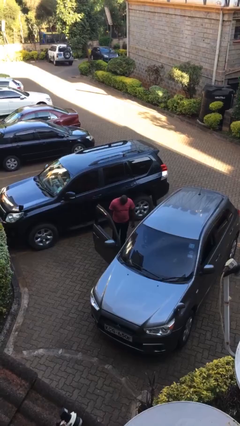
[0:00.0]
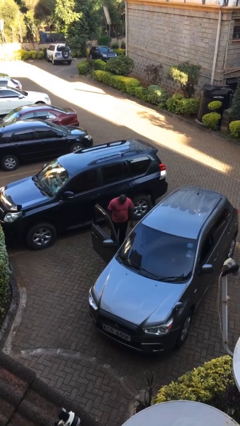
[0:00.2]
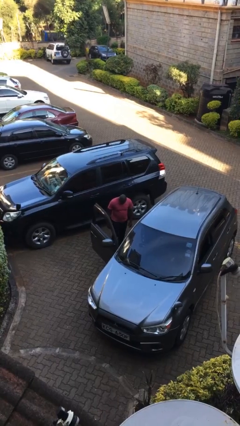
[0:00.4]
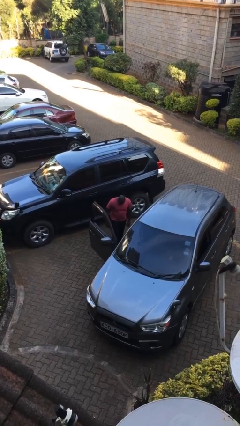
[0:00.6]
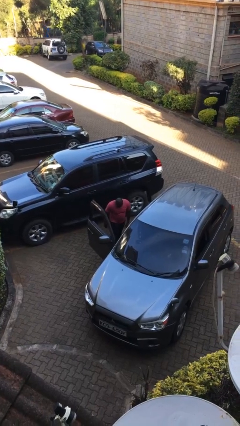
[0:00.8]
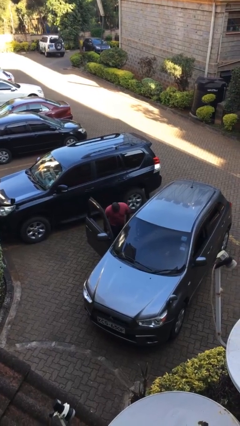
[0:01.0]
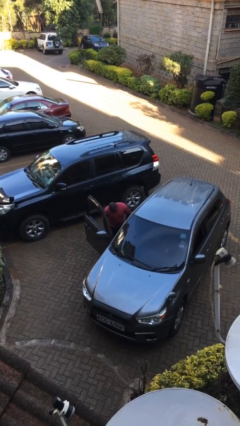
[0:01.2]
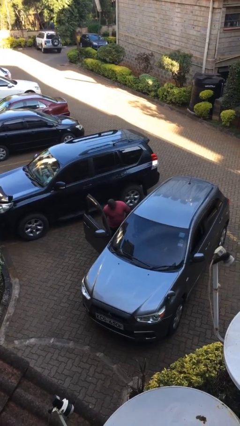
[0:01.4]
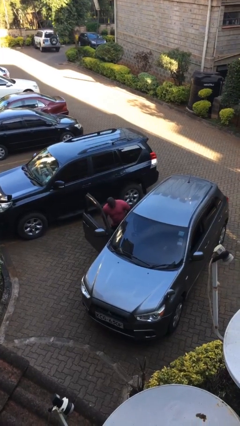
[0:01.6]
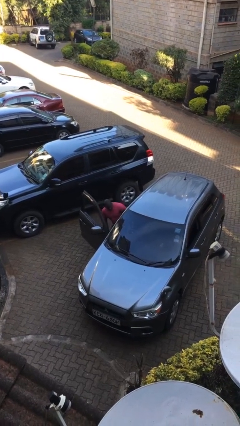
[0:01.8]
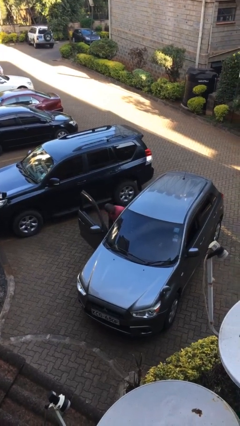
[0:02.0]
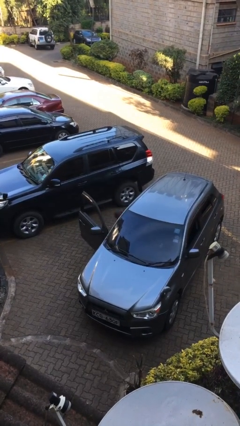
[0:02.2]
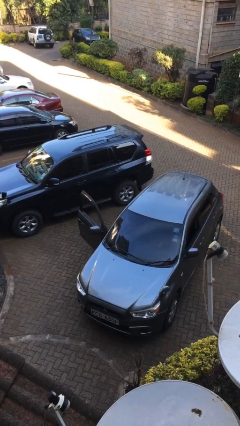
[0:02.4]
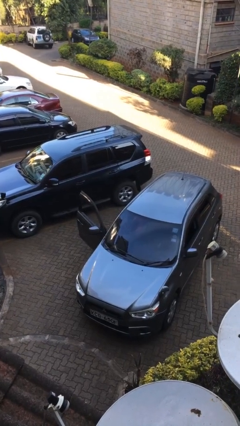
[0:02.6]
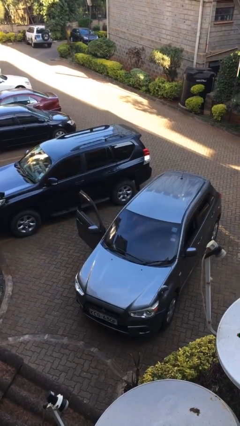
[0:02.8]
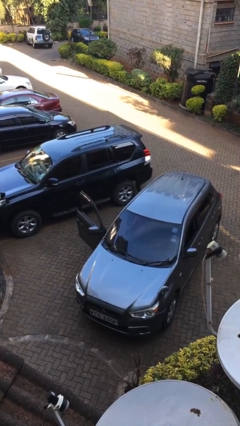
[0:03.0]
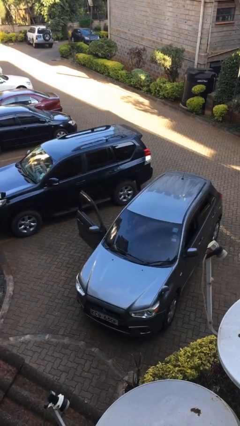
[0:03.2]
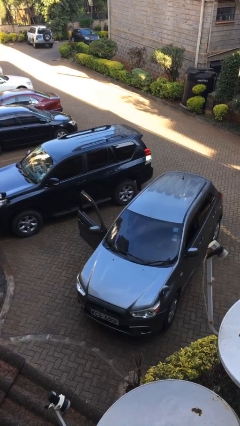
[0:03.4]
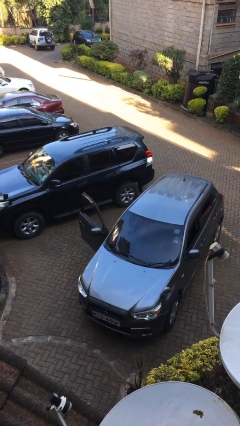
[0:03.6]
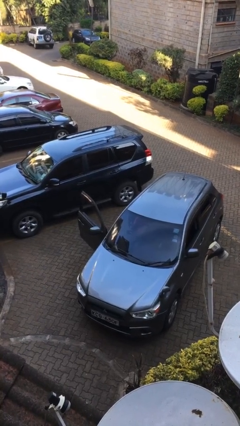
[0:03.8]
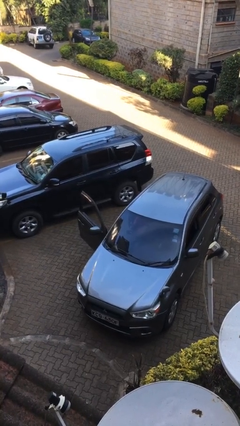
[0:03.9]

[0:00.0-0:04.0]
person enters car

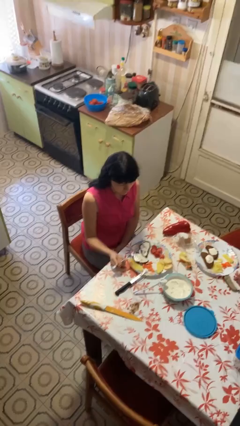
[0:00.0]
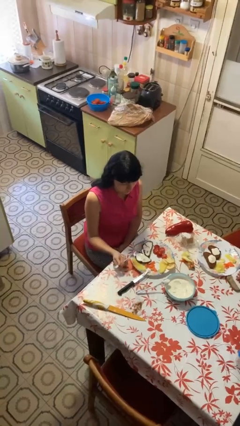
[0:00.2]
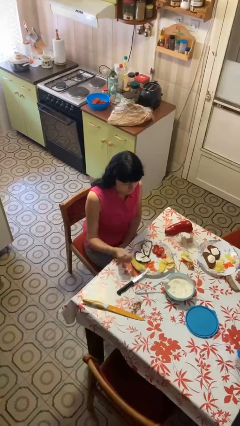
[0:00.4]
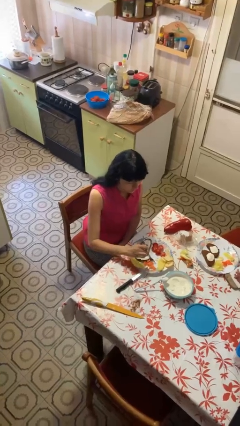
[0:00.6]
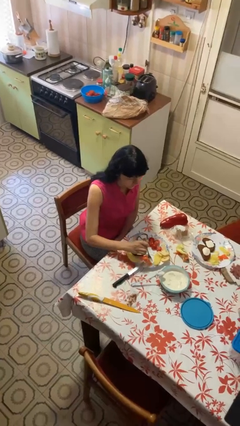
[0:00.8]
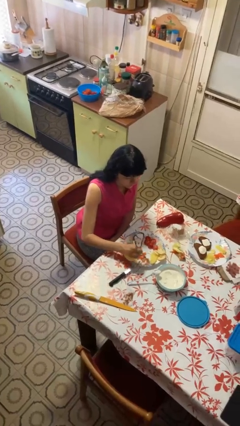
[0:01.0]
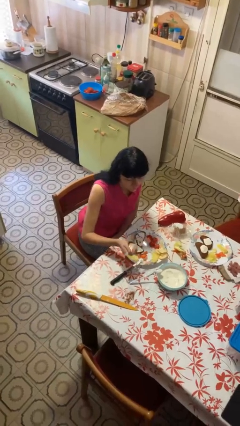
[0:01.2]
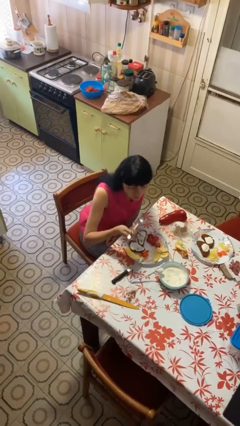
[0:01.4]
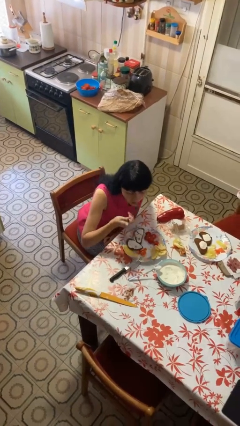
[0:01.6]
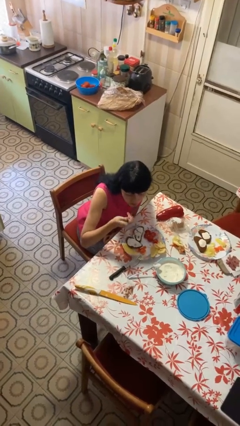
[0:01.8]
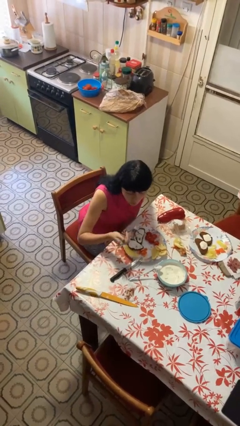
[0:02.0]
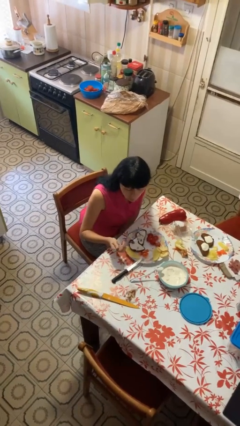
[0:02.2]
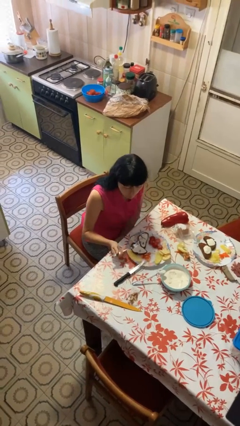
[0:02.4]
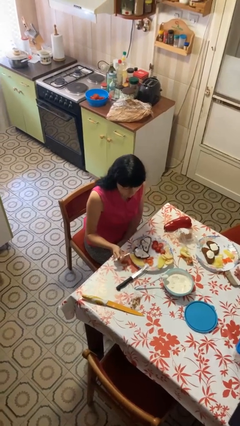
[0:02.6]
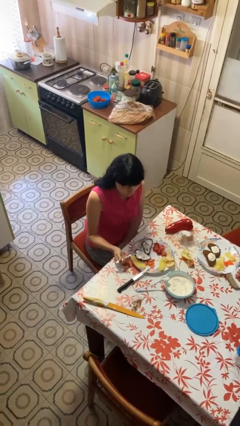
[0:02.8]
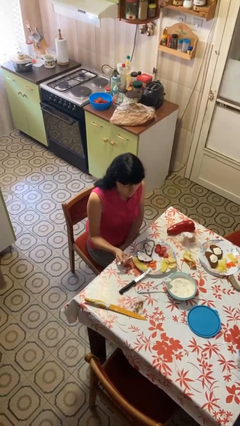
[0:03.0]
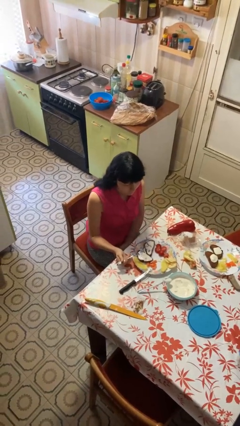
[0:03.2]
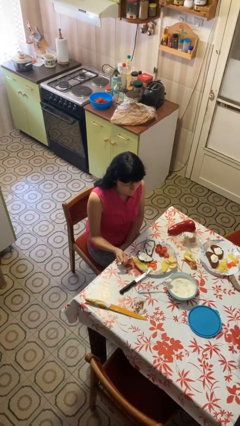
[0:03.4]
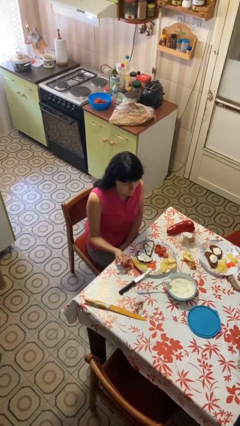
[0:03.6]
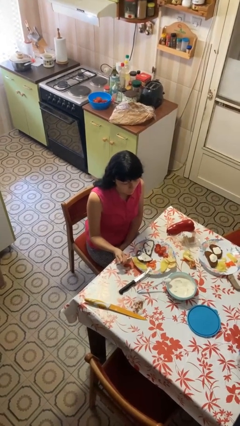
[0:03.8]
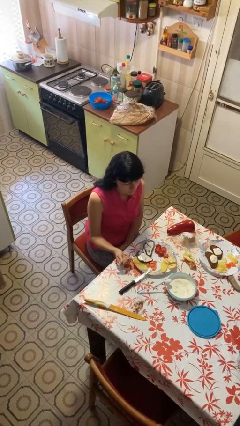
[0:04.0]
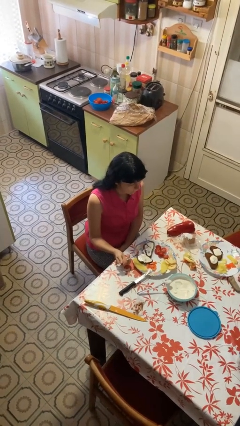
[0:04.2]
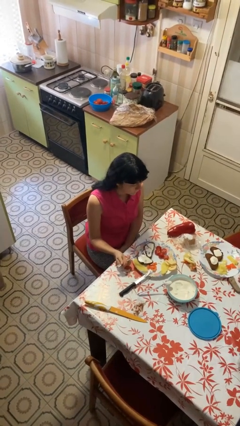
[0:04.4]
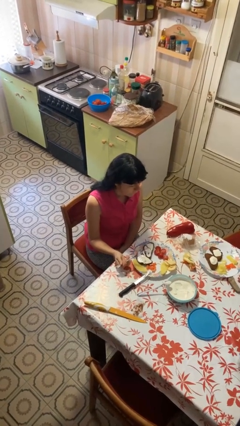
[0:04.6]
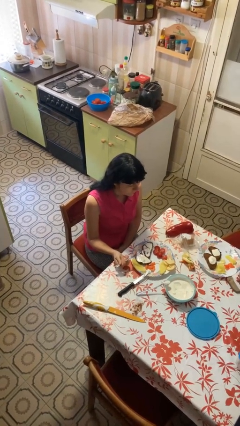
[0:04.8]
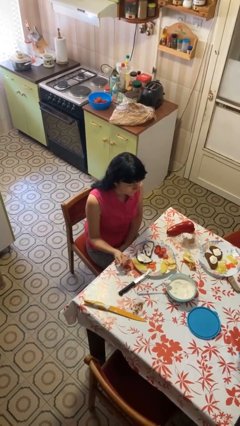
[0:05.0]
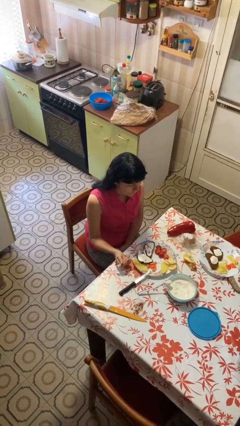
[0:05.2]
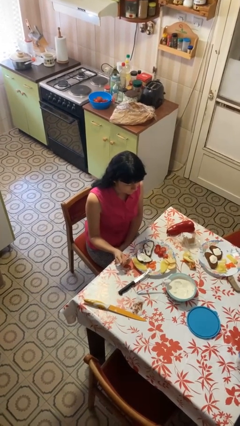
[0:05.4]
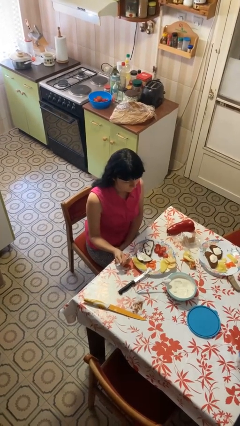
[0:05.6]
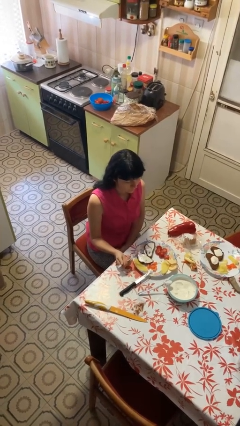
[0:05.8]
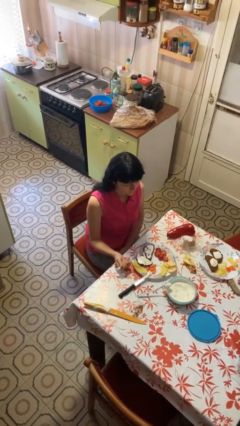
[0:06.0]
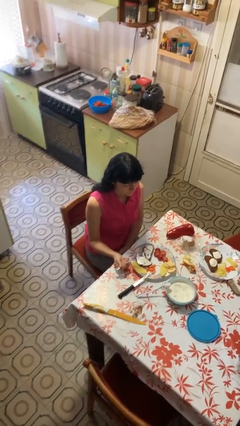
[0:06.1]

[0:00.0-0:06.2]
person eats with utensil

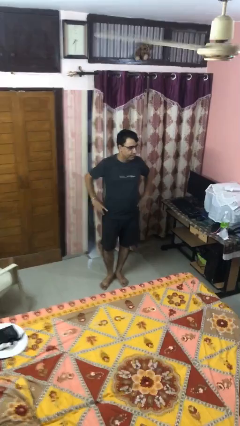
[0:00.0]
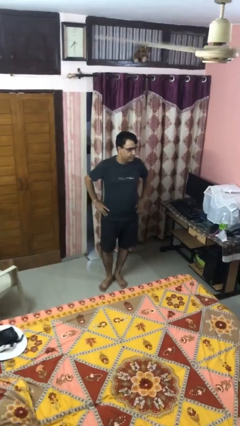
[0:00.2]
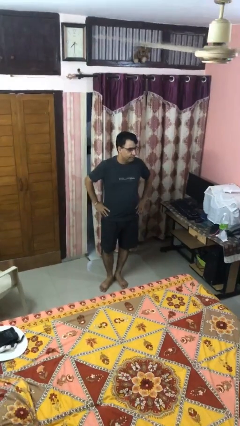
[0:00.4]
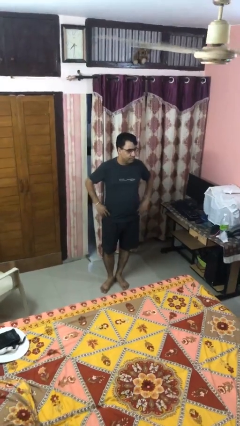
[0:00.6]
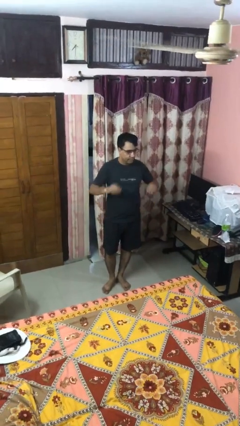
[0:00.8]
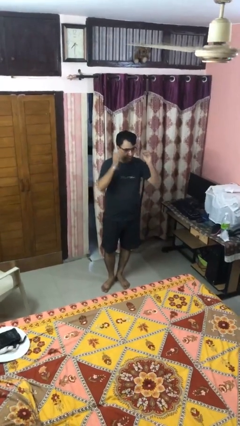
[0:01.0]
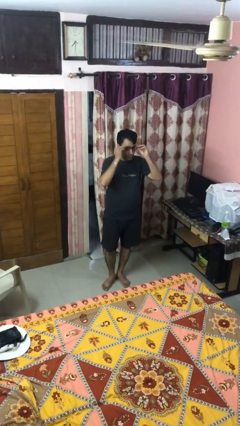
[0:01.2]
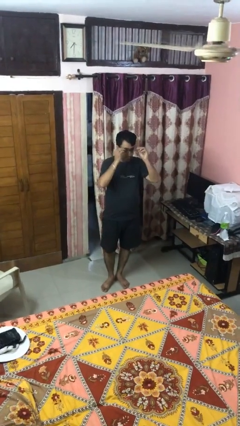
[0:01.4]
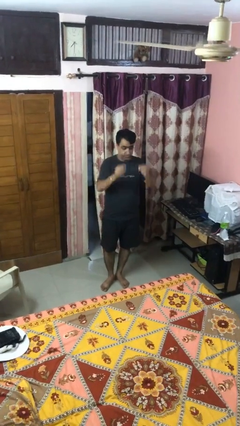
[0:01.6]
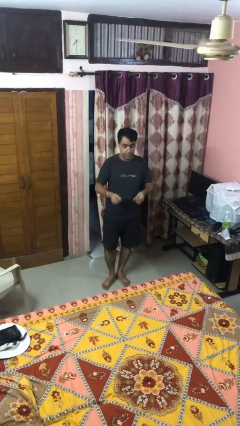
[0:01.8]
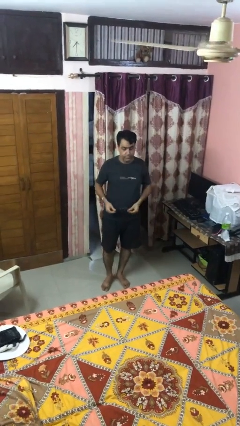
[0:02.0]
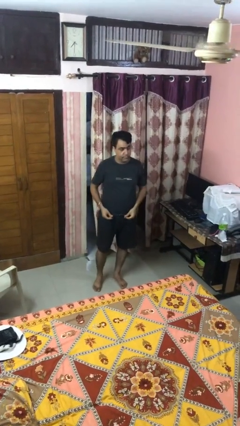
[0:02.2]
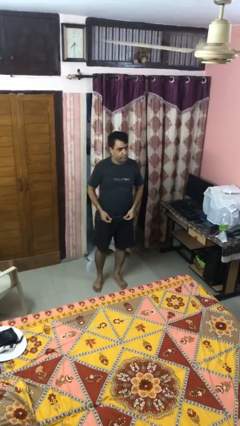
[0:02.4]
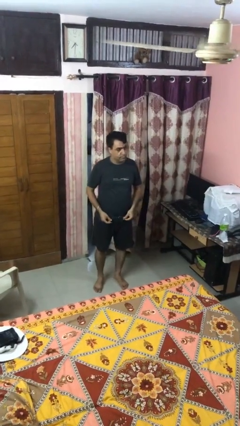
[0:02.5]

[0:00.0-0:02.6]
person takes off glasses

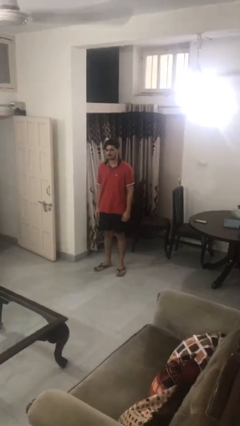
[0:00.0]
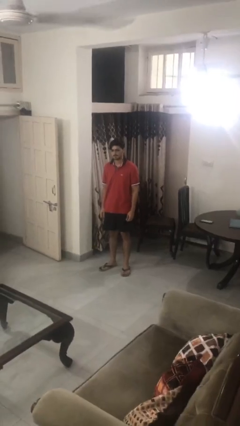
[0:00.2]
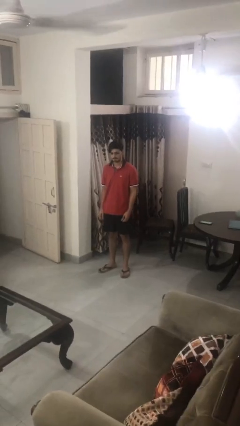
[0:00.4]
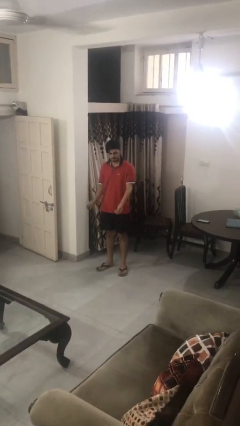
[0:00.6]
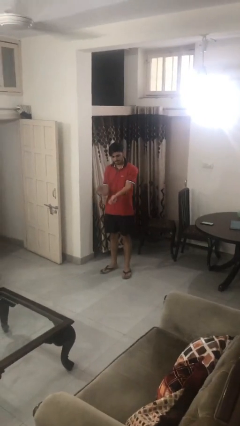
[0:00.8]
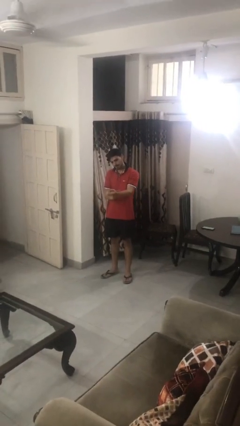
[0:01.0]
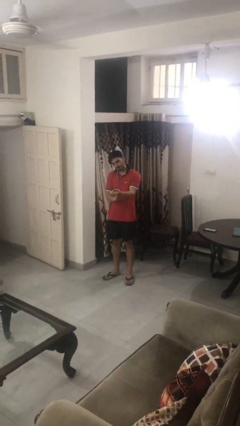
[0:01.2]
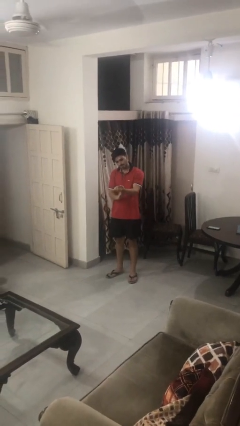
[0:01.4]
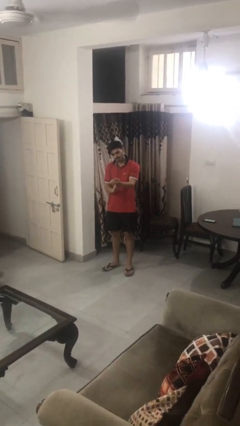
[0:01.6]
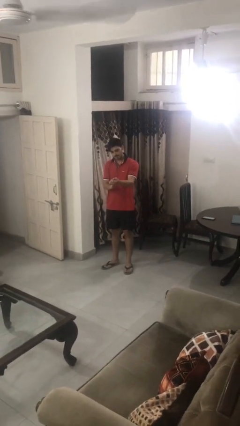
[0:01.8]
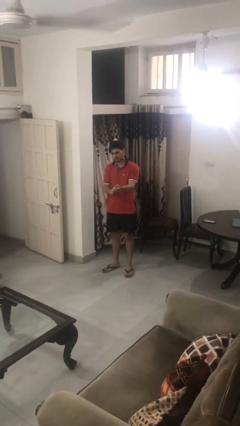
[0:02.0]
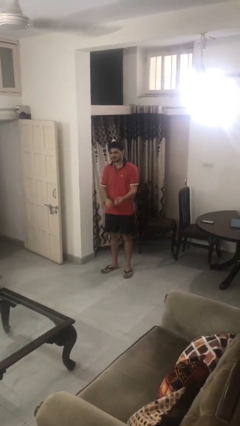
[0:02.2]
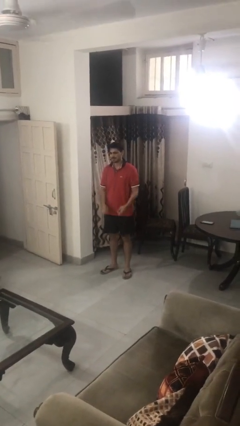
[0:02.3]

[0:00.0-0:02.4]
person swats bug

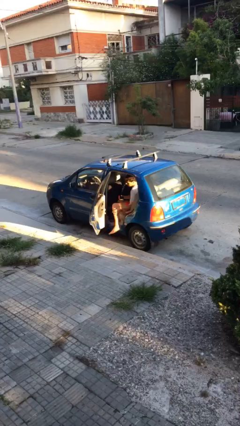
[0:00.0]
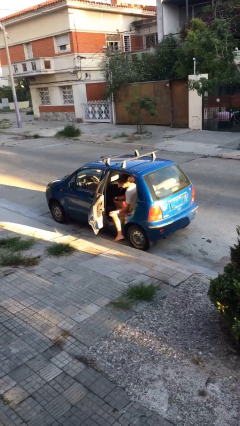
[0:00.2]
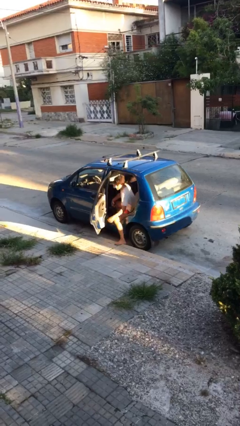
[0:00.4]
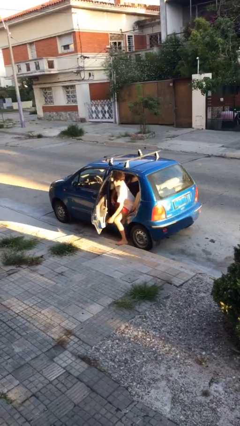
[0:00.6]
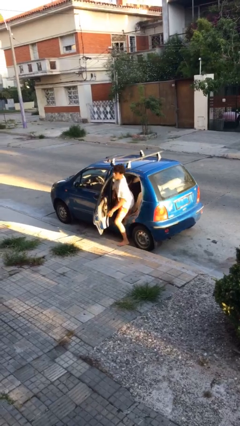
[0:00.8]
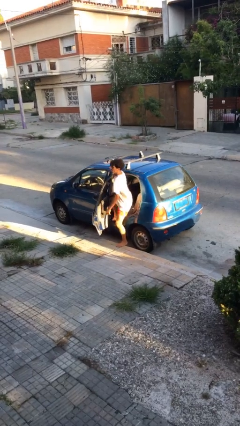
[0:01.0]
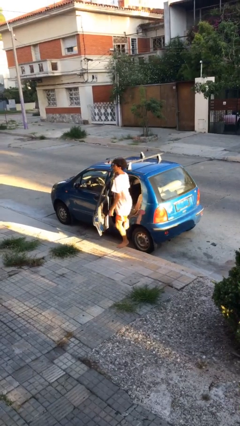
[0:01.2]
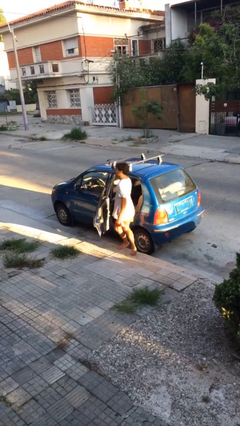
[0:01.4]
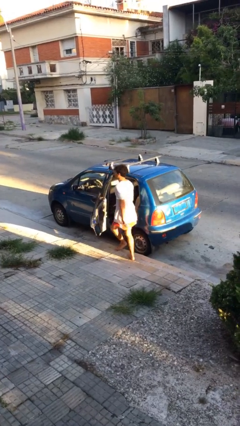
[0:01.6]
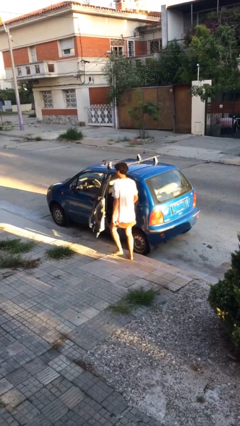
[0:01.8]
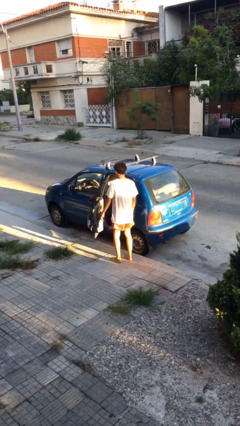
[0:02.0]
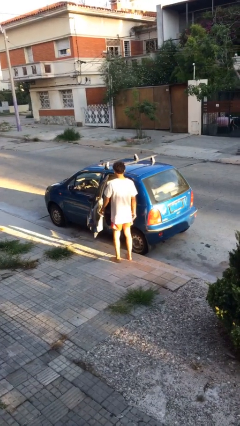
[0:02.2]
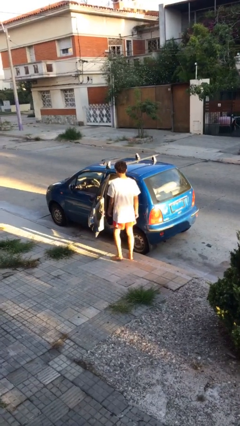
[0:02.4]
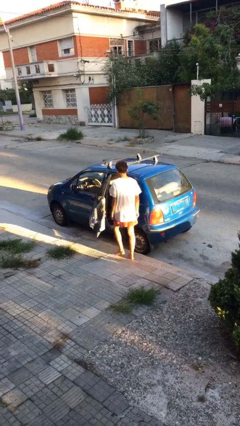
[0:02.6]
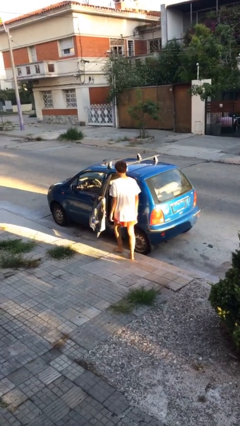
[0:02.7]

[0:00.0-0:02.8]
person exits car
